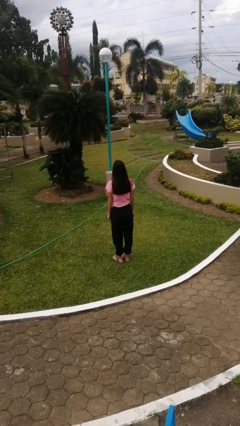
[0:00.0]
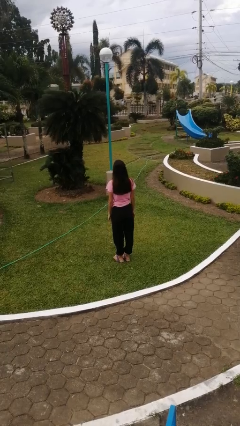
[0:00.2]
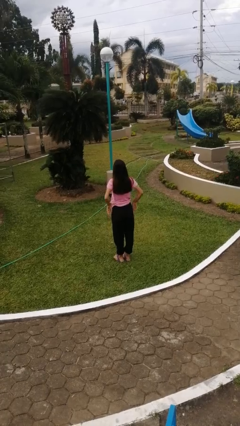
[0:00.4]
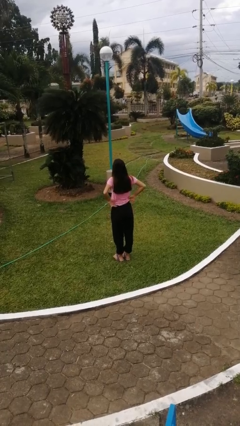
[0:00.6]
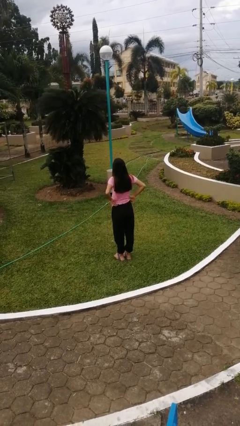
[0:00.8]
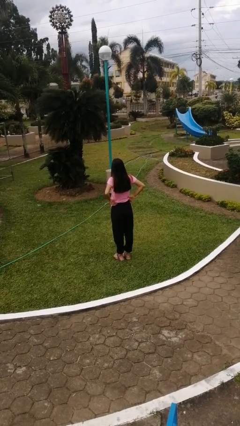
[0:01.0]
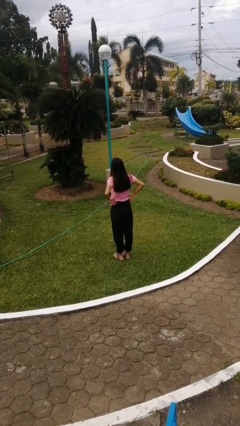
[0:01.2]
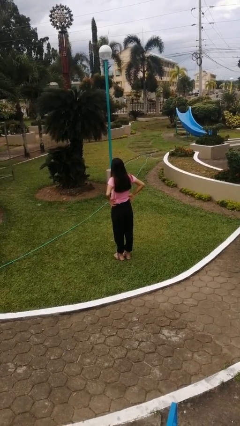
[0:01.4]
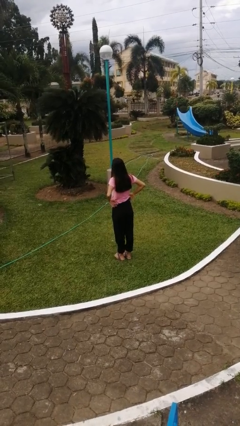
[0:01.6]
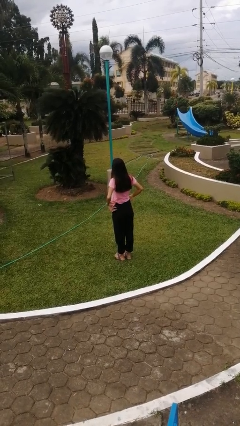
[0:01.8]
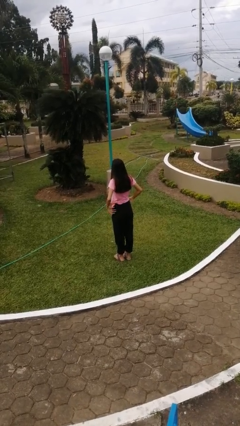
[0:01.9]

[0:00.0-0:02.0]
person hikes up pants

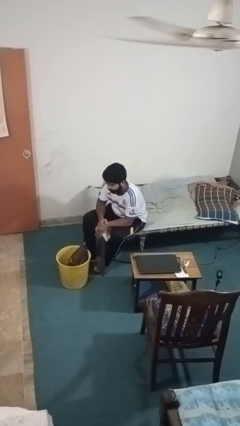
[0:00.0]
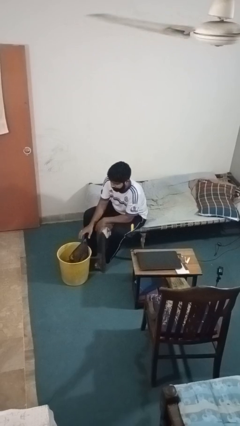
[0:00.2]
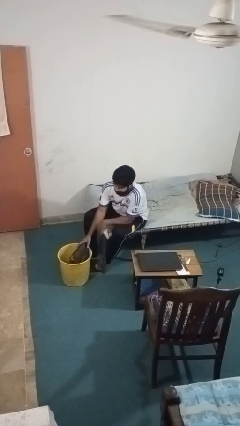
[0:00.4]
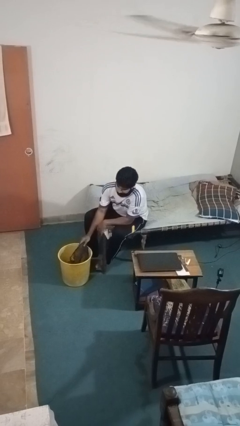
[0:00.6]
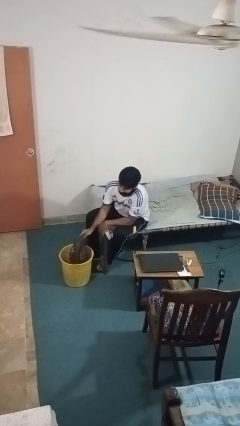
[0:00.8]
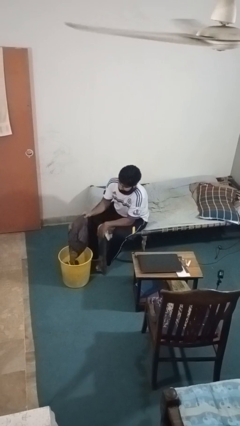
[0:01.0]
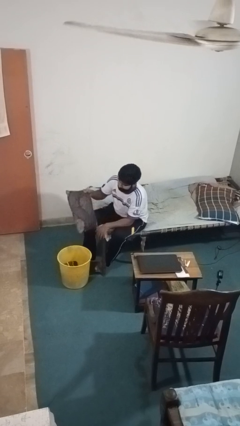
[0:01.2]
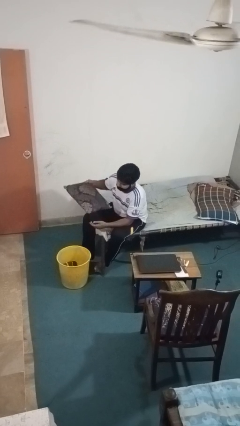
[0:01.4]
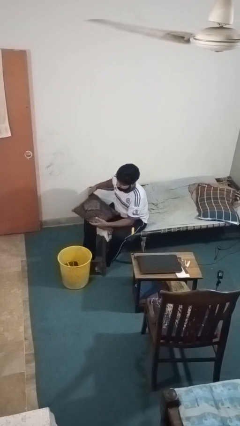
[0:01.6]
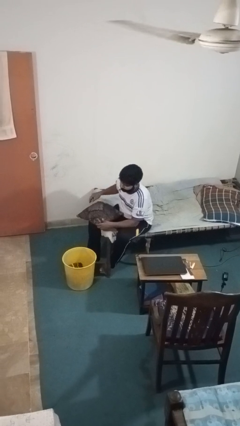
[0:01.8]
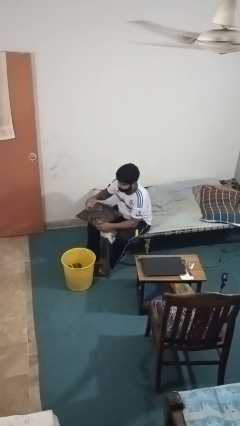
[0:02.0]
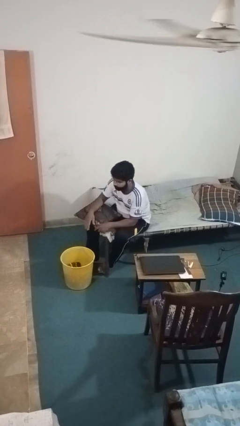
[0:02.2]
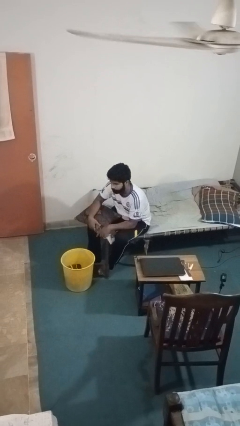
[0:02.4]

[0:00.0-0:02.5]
person takes object from basket

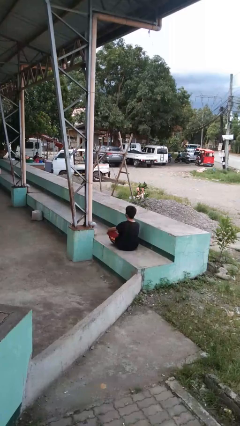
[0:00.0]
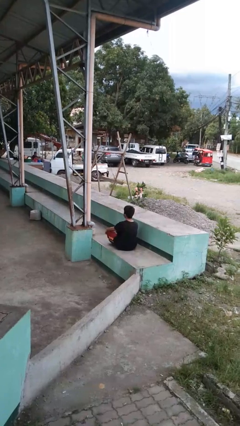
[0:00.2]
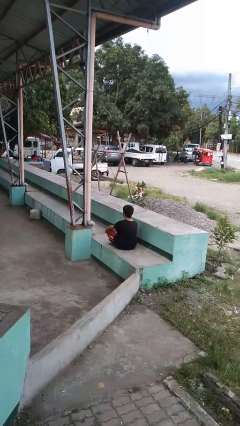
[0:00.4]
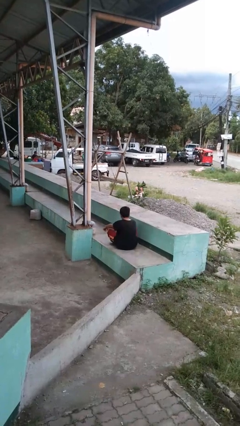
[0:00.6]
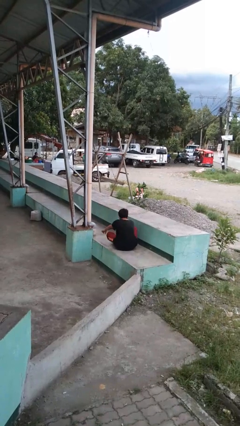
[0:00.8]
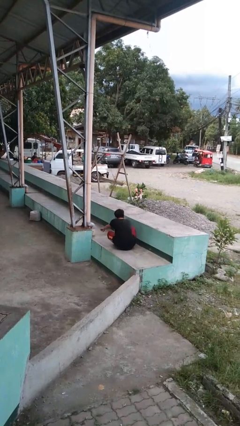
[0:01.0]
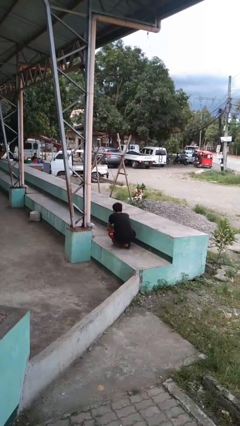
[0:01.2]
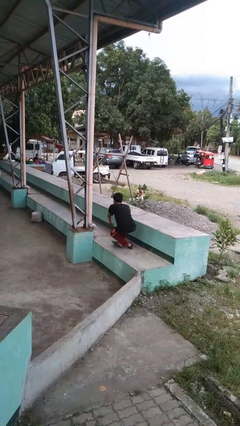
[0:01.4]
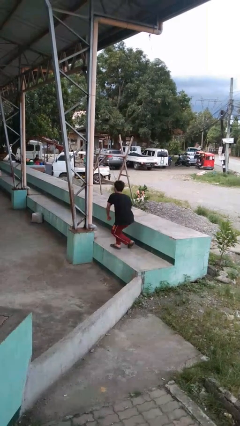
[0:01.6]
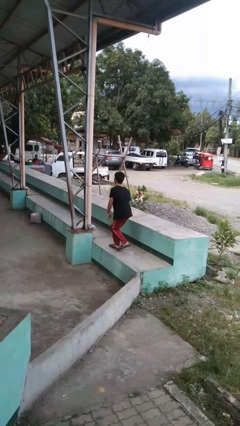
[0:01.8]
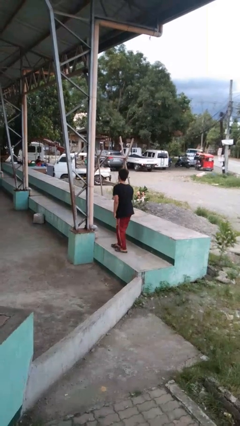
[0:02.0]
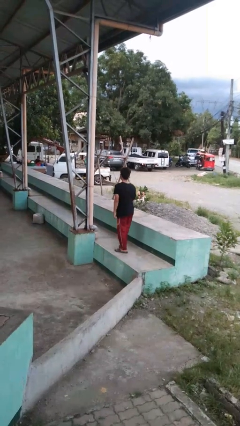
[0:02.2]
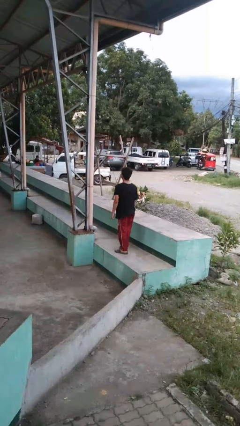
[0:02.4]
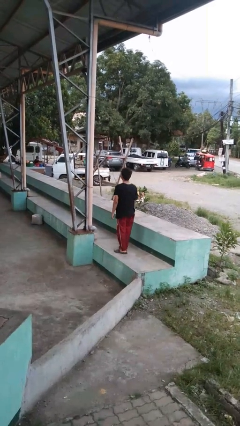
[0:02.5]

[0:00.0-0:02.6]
person stands up from floor

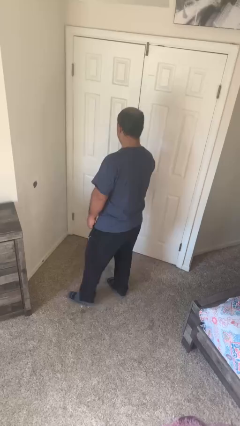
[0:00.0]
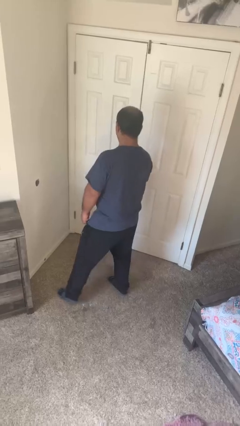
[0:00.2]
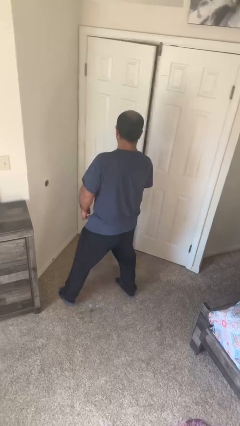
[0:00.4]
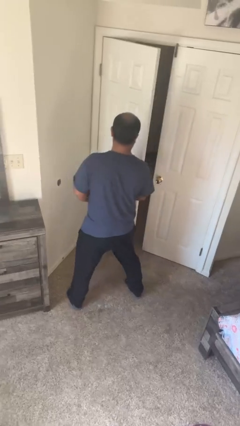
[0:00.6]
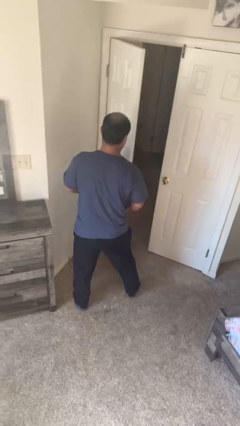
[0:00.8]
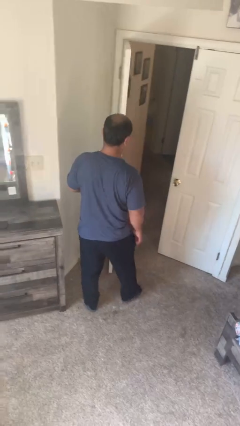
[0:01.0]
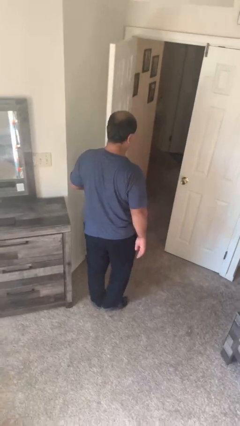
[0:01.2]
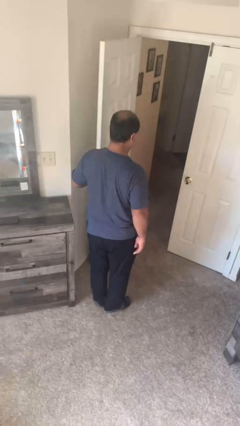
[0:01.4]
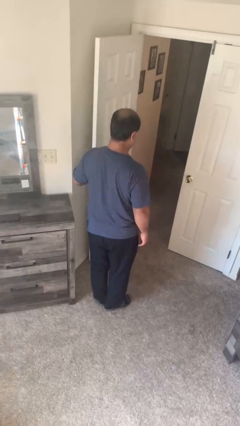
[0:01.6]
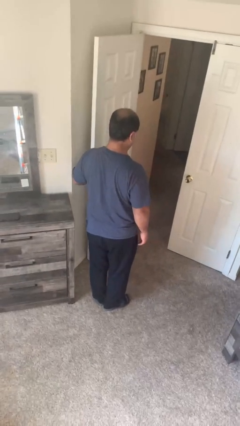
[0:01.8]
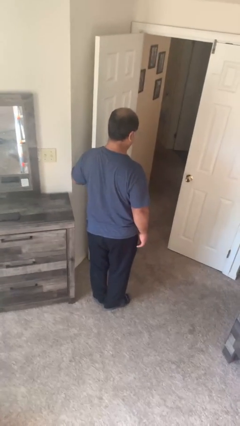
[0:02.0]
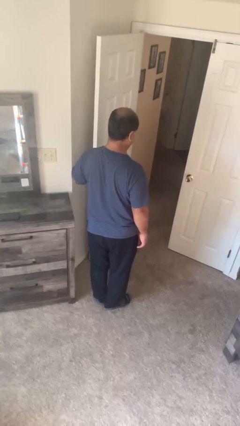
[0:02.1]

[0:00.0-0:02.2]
person opens facility door

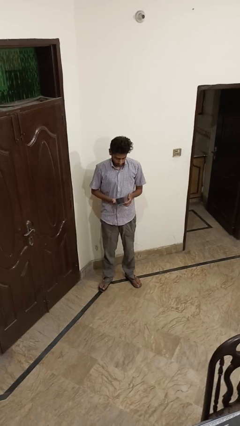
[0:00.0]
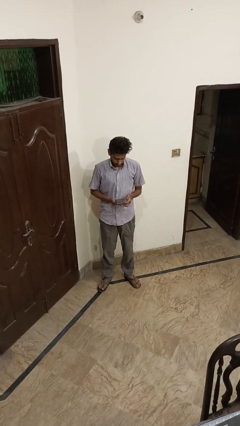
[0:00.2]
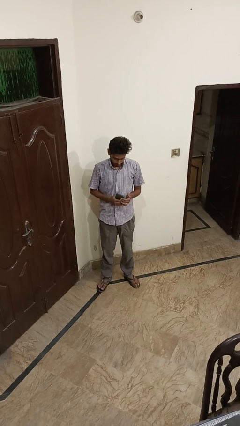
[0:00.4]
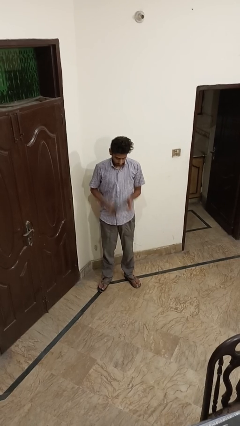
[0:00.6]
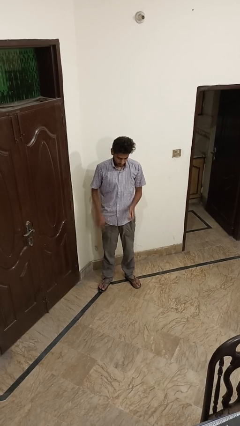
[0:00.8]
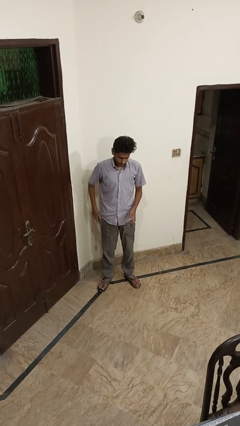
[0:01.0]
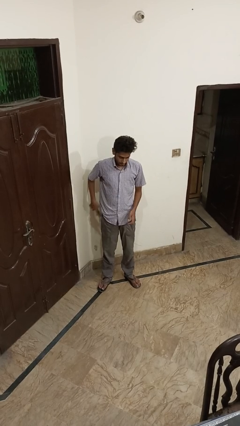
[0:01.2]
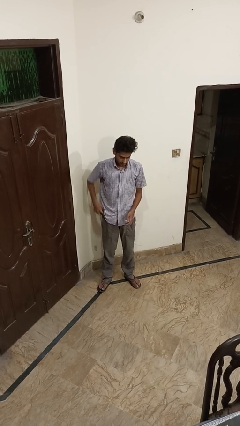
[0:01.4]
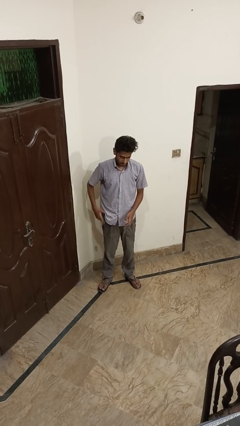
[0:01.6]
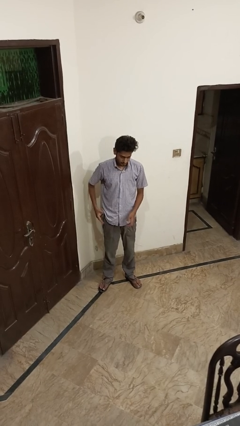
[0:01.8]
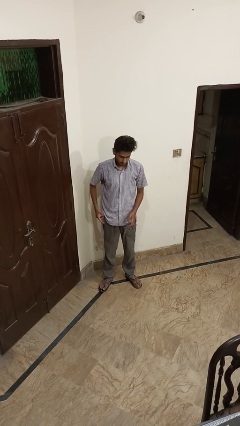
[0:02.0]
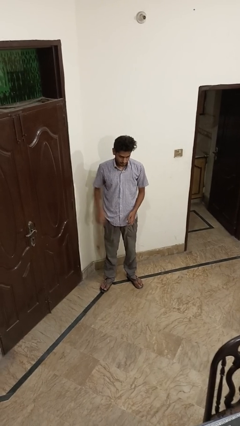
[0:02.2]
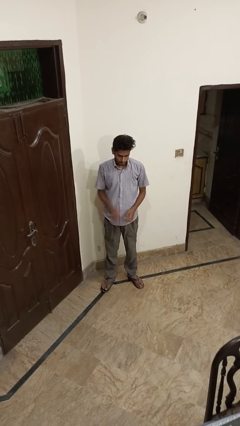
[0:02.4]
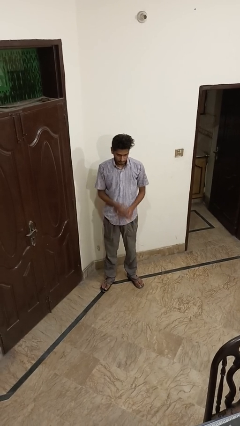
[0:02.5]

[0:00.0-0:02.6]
person puts phone into pocket

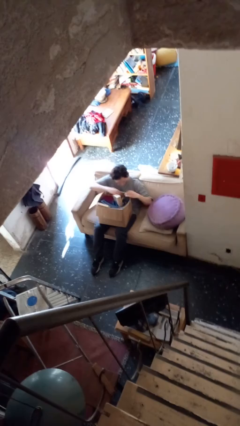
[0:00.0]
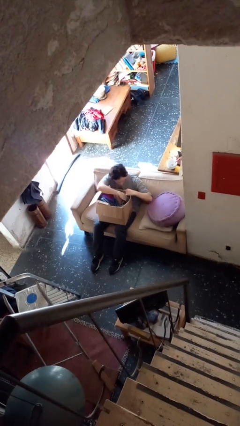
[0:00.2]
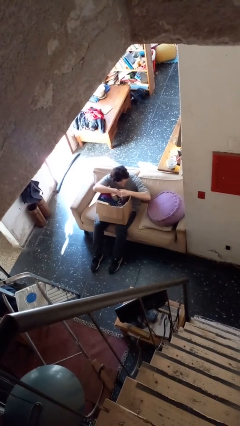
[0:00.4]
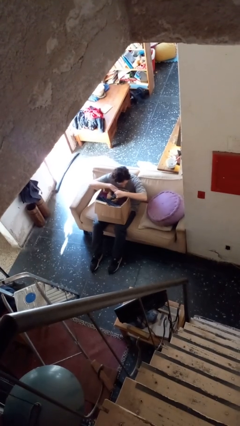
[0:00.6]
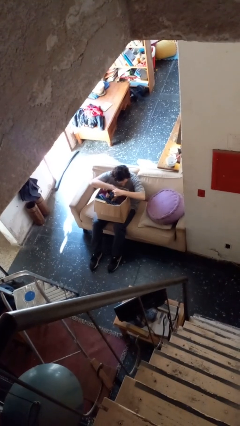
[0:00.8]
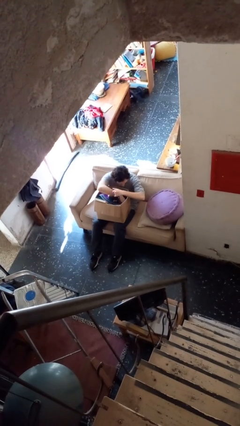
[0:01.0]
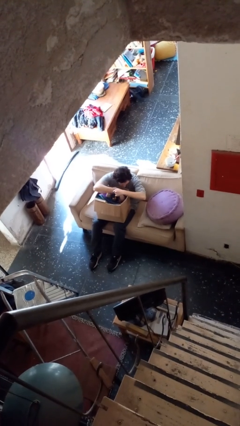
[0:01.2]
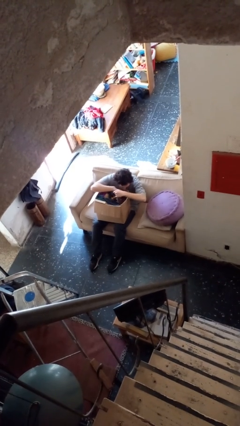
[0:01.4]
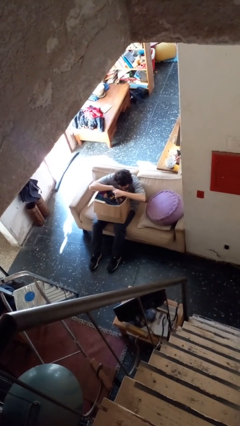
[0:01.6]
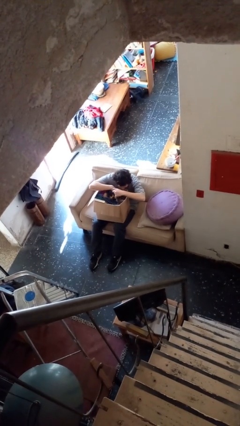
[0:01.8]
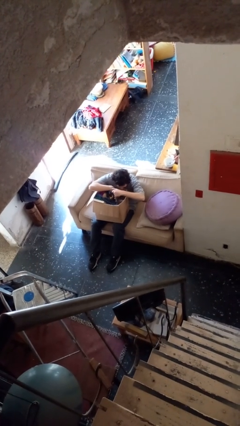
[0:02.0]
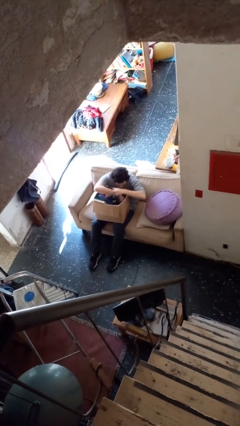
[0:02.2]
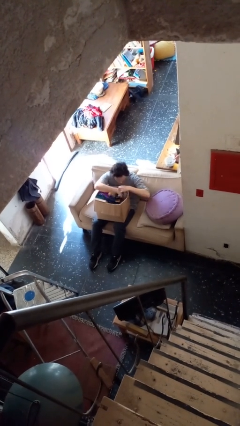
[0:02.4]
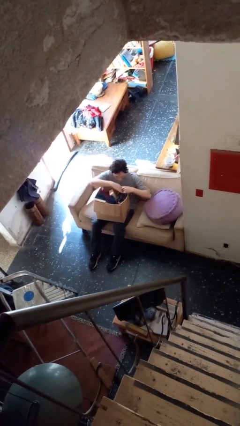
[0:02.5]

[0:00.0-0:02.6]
person searches in box

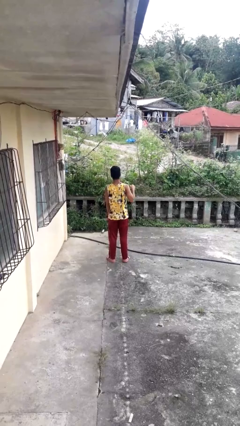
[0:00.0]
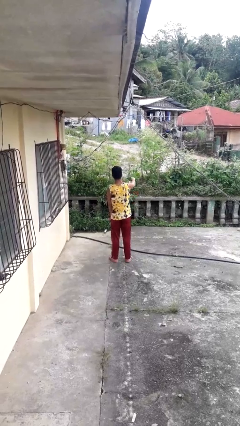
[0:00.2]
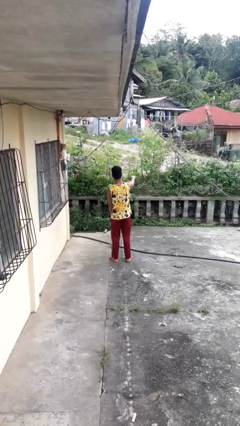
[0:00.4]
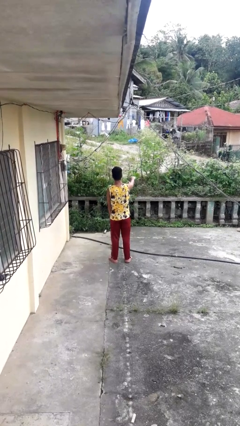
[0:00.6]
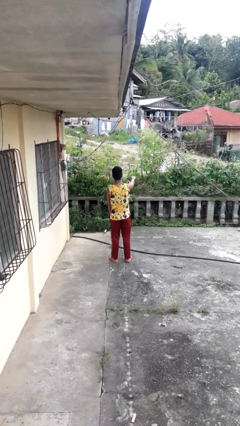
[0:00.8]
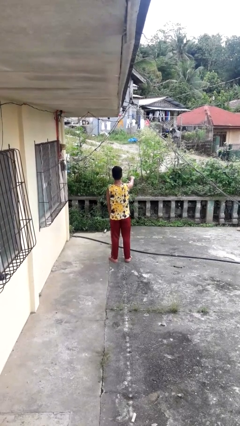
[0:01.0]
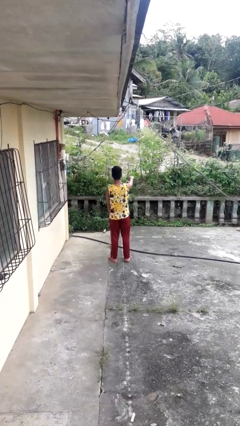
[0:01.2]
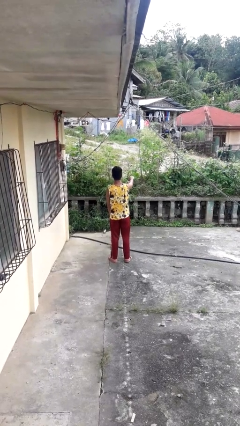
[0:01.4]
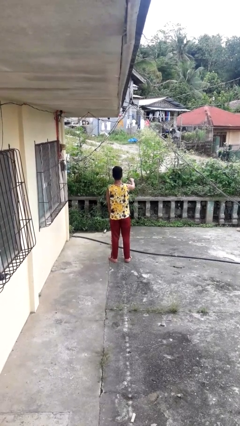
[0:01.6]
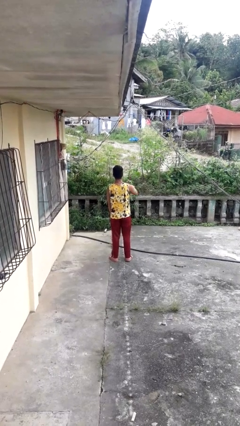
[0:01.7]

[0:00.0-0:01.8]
person punches

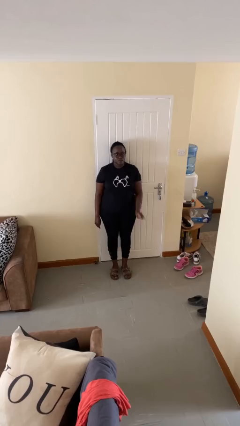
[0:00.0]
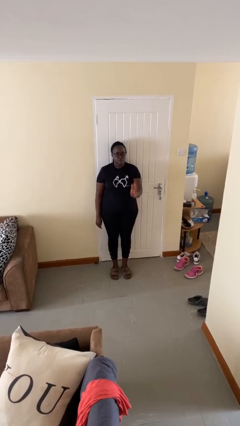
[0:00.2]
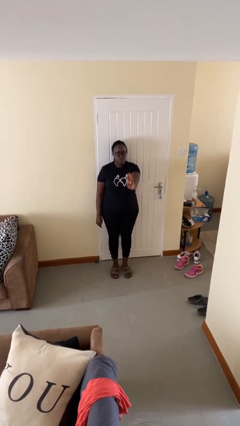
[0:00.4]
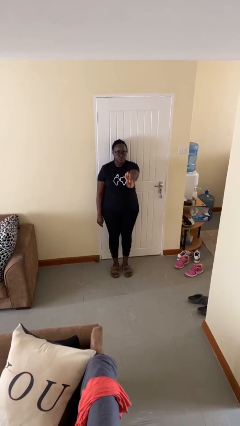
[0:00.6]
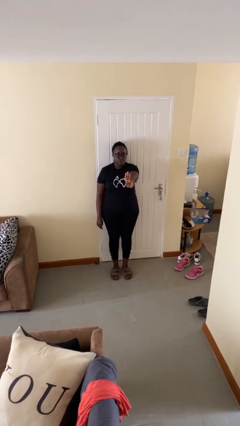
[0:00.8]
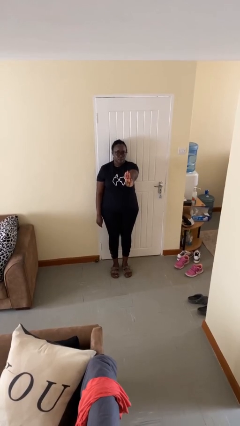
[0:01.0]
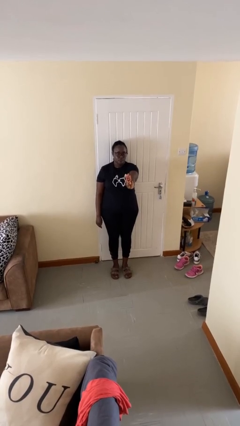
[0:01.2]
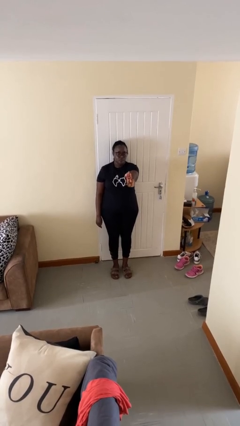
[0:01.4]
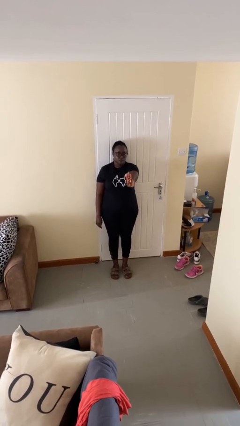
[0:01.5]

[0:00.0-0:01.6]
person gestures number three
